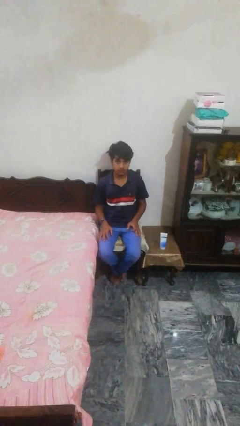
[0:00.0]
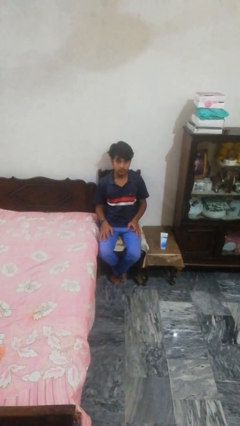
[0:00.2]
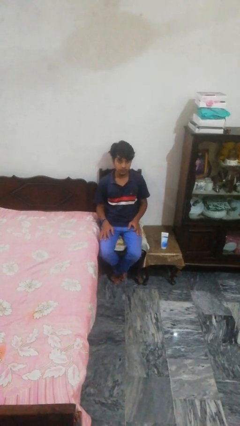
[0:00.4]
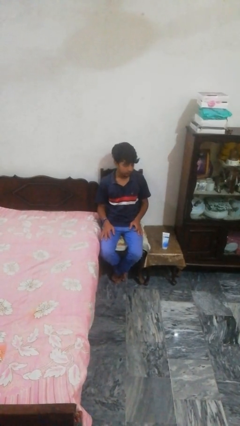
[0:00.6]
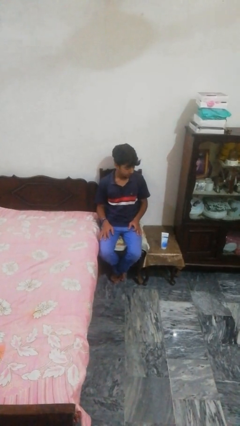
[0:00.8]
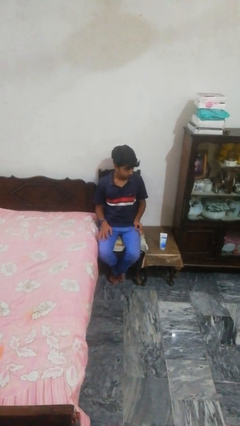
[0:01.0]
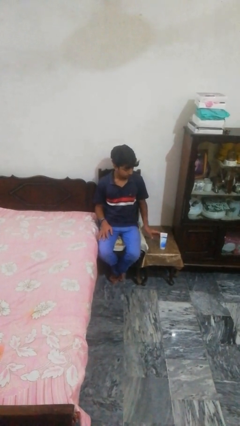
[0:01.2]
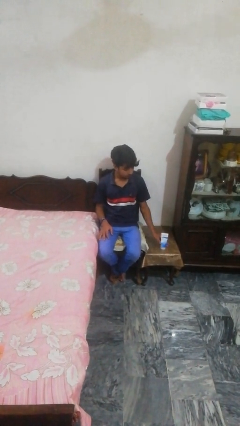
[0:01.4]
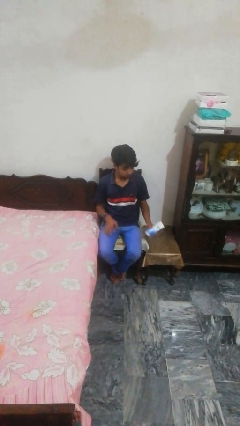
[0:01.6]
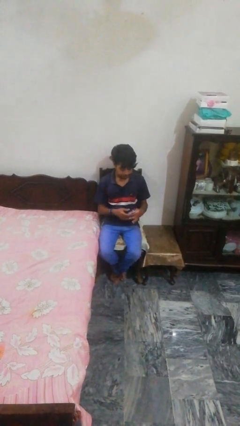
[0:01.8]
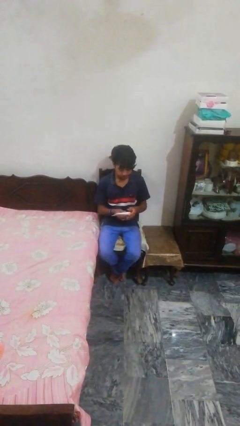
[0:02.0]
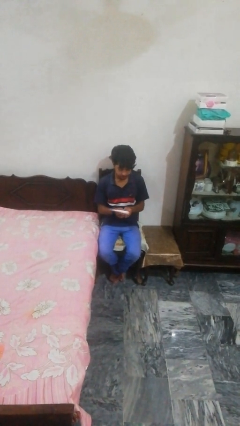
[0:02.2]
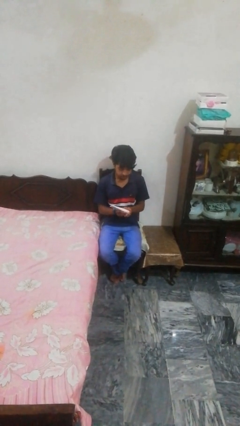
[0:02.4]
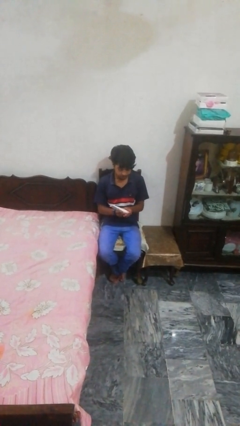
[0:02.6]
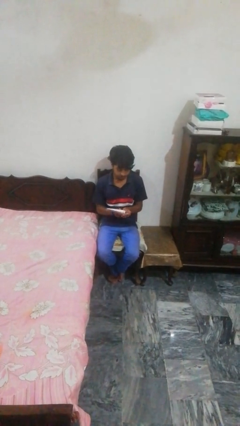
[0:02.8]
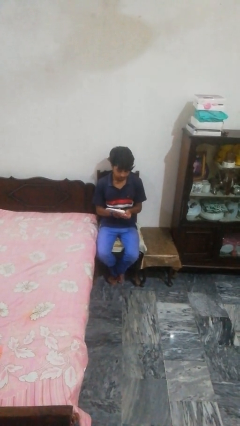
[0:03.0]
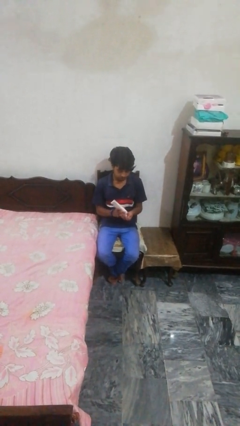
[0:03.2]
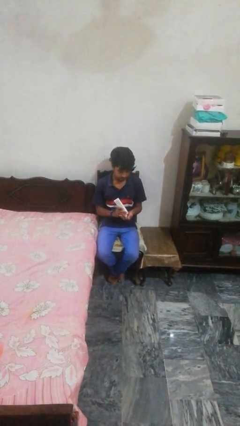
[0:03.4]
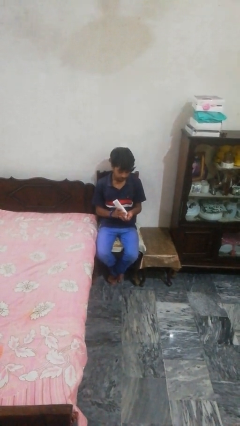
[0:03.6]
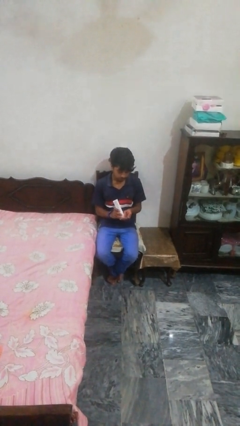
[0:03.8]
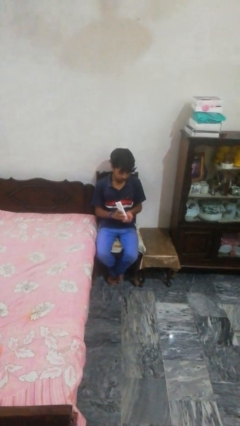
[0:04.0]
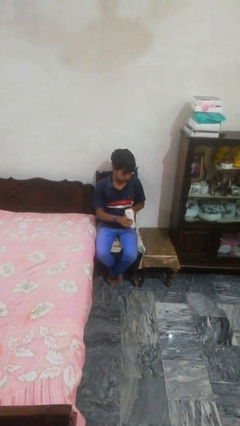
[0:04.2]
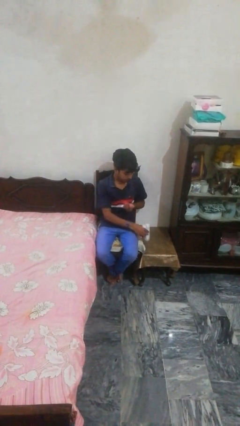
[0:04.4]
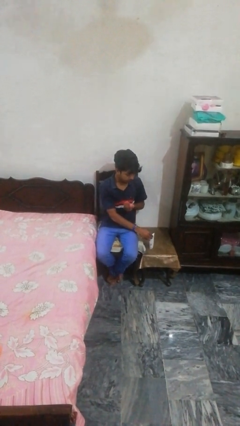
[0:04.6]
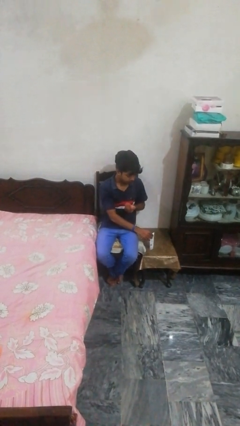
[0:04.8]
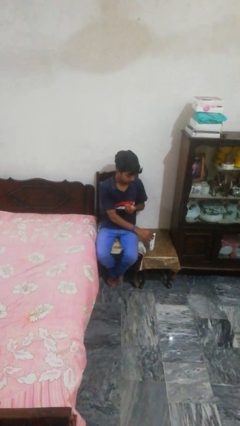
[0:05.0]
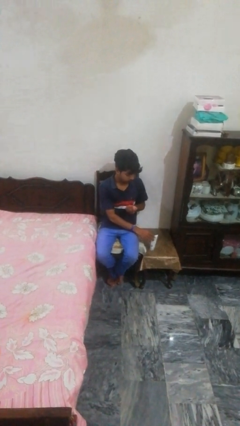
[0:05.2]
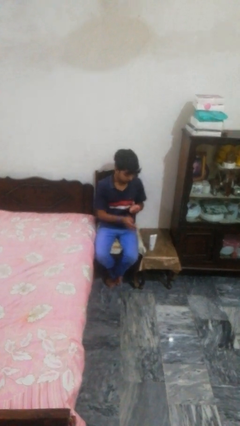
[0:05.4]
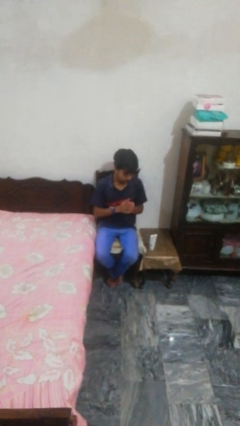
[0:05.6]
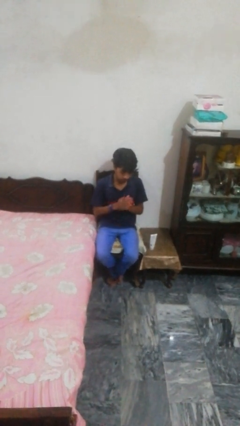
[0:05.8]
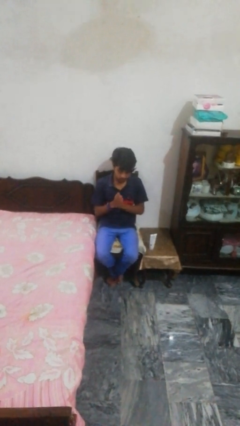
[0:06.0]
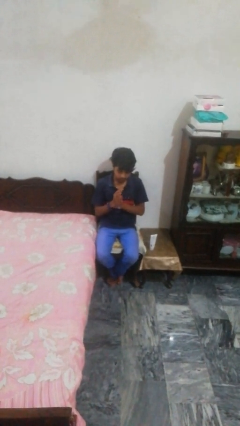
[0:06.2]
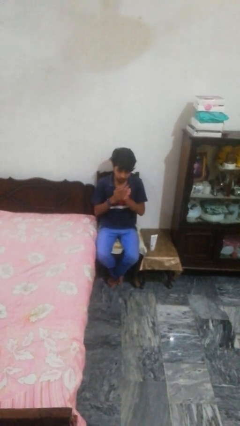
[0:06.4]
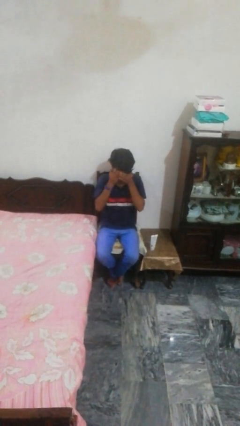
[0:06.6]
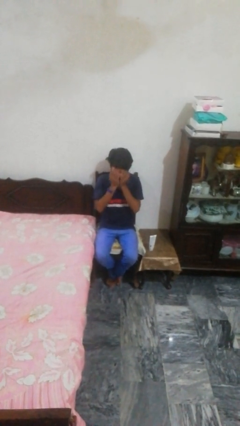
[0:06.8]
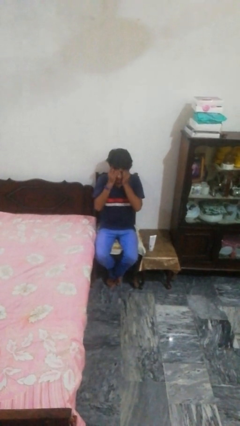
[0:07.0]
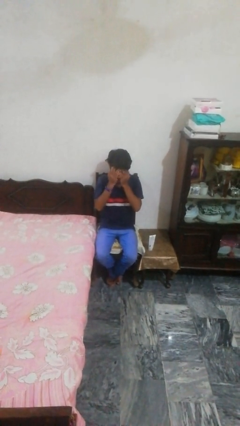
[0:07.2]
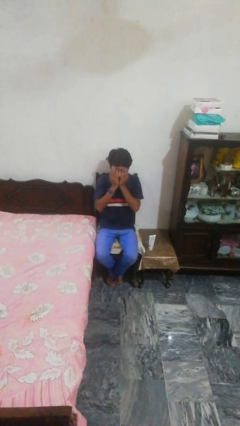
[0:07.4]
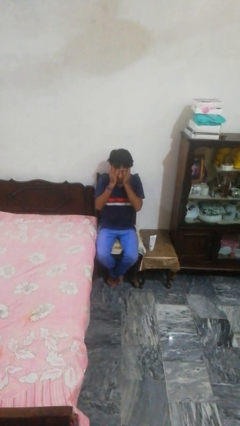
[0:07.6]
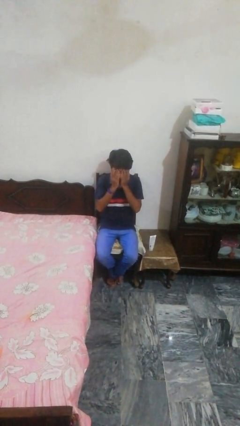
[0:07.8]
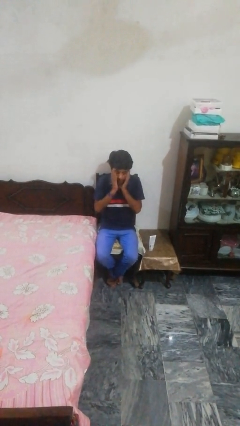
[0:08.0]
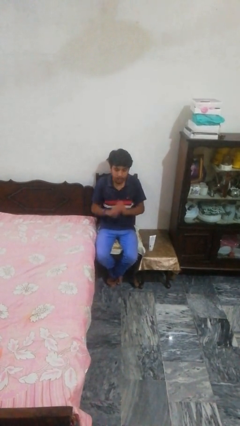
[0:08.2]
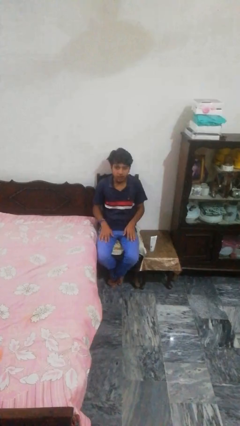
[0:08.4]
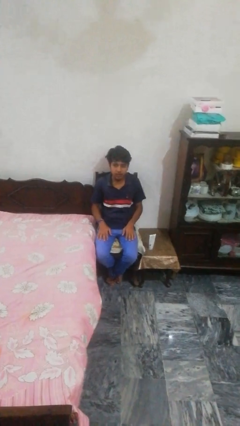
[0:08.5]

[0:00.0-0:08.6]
person applies facial moisturizer

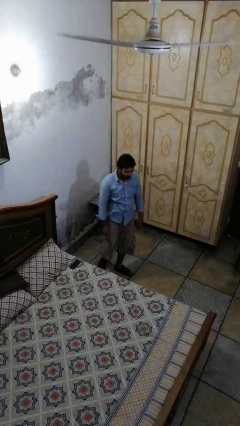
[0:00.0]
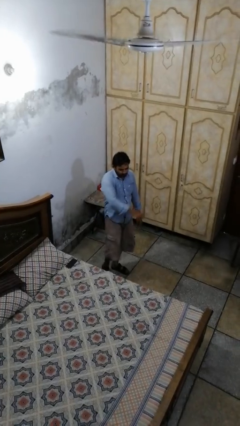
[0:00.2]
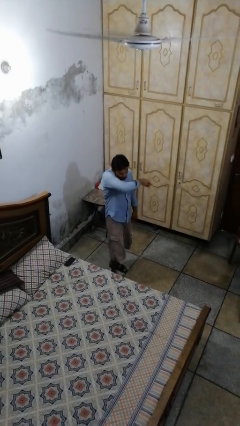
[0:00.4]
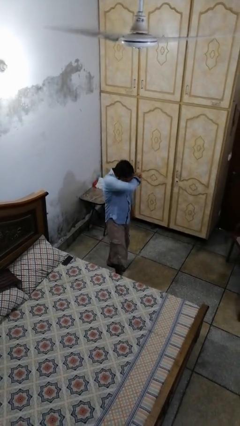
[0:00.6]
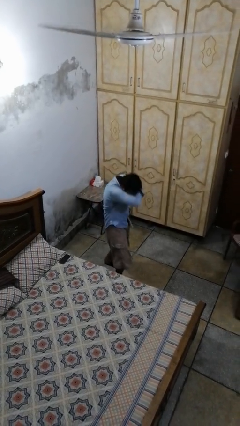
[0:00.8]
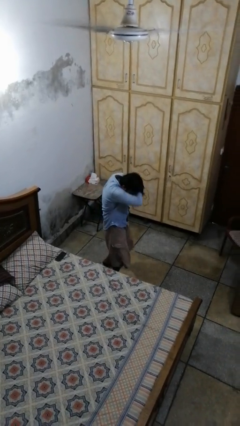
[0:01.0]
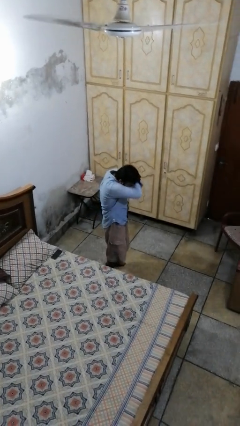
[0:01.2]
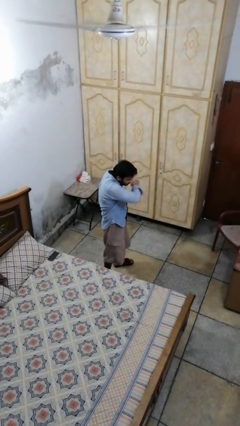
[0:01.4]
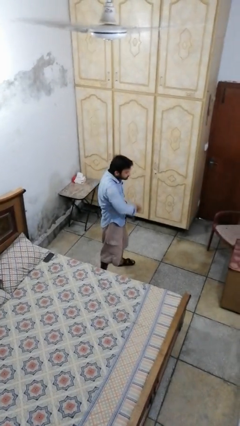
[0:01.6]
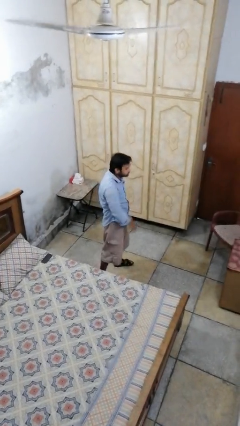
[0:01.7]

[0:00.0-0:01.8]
person sneezes into arm

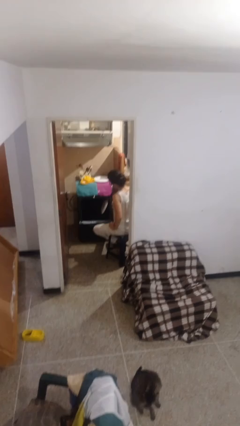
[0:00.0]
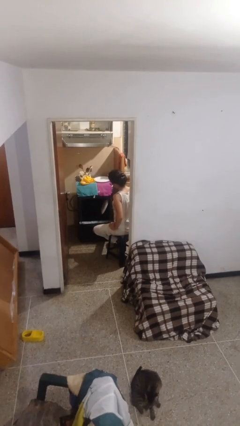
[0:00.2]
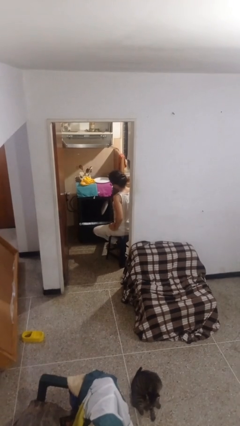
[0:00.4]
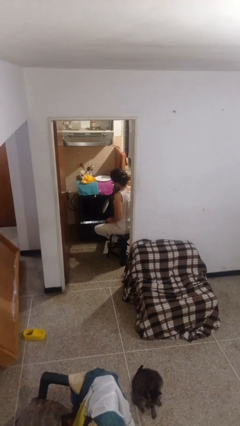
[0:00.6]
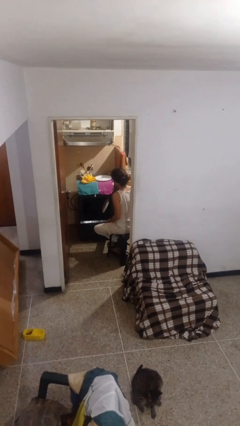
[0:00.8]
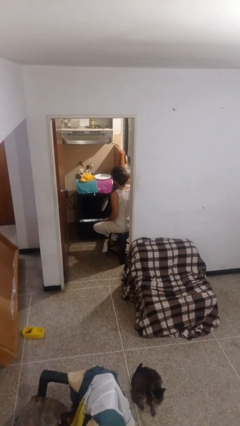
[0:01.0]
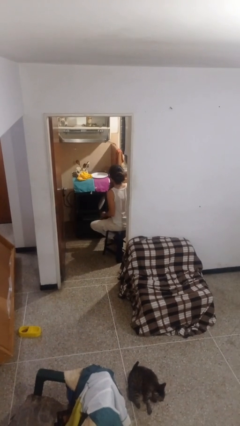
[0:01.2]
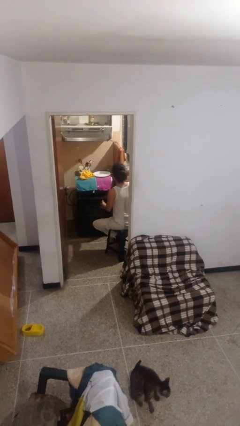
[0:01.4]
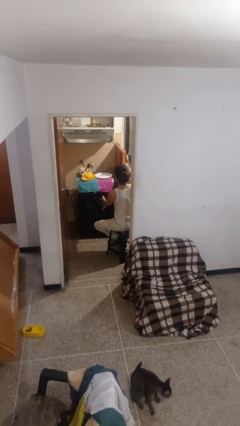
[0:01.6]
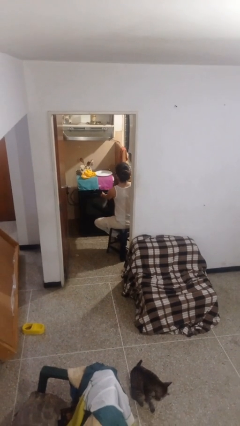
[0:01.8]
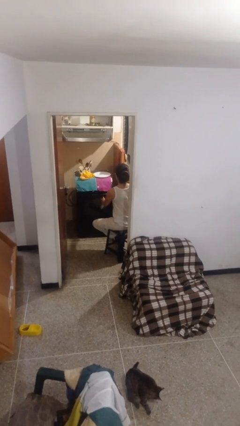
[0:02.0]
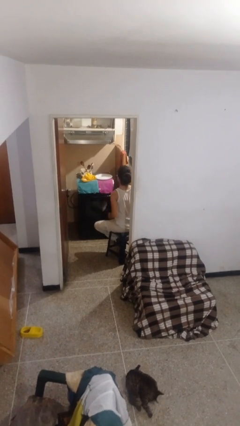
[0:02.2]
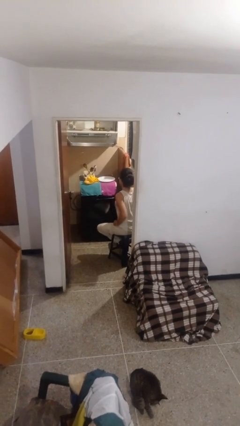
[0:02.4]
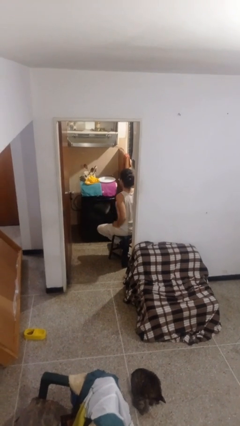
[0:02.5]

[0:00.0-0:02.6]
person closes dishwasher

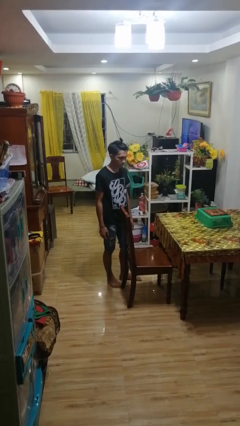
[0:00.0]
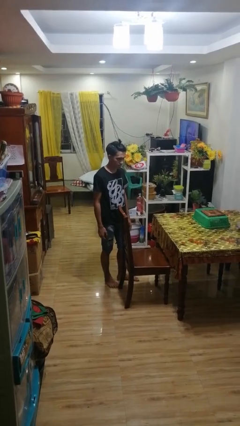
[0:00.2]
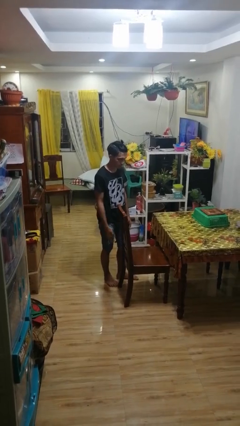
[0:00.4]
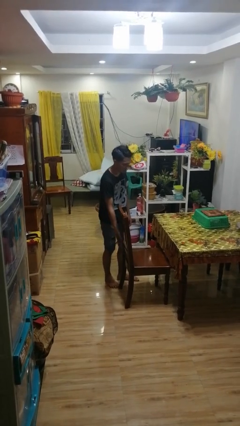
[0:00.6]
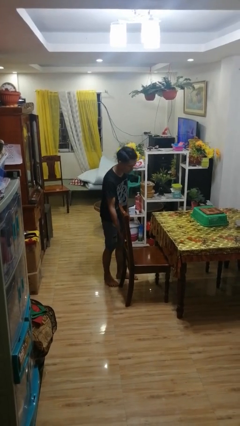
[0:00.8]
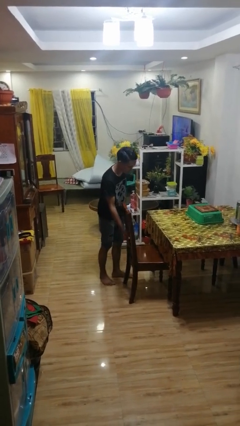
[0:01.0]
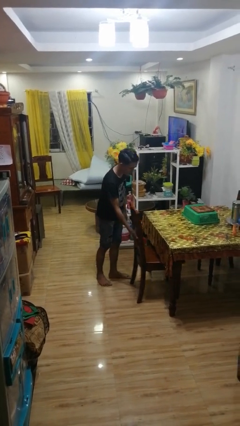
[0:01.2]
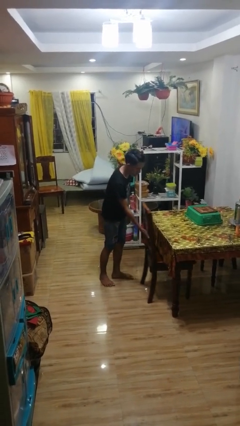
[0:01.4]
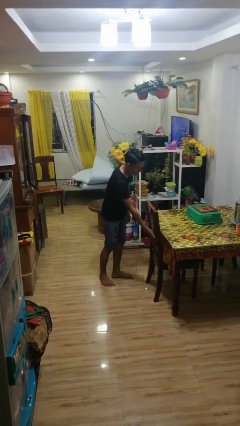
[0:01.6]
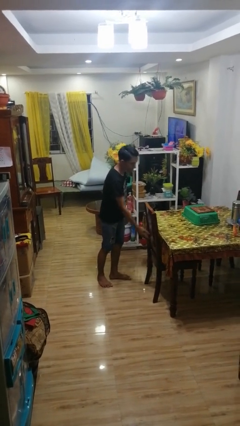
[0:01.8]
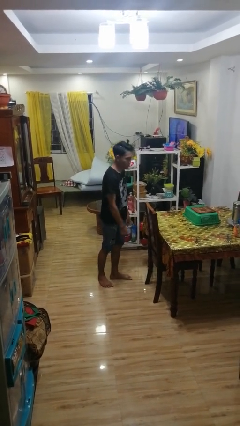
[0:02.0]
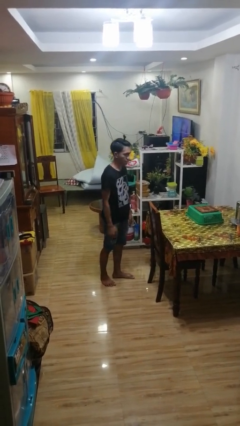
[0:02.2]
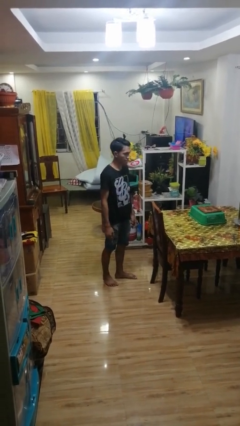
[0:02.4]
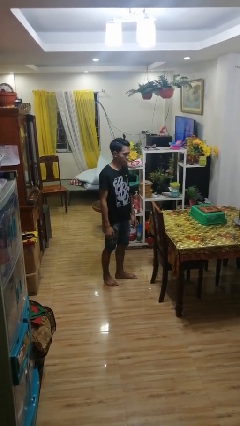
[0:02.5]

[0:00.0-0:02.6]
person pushes in chair

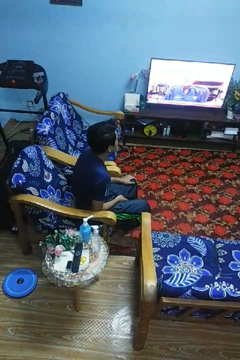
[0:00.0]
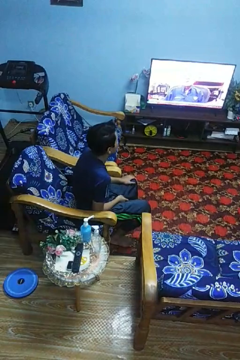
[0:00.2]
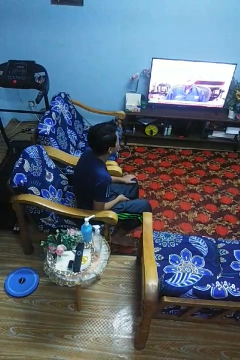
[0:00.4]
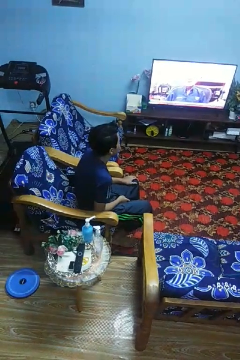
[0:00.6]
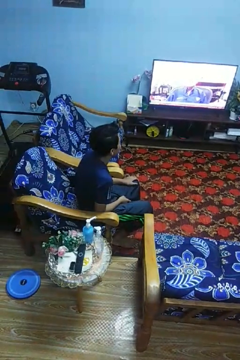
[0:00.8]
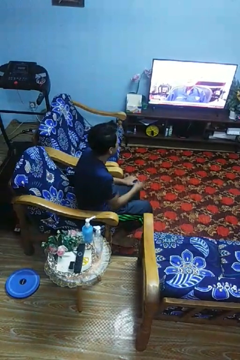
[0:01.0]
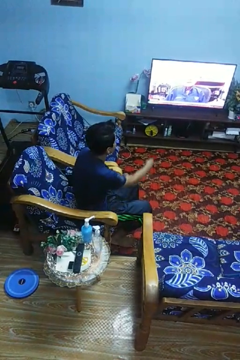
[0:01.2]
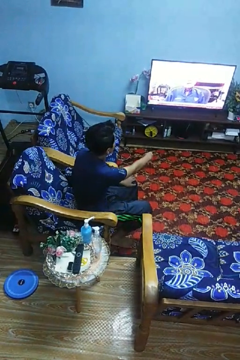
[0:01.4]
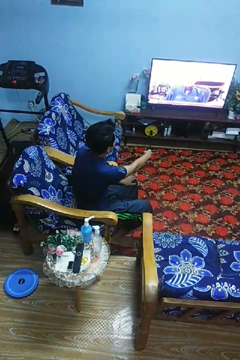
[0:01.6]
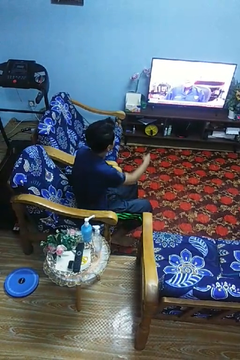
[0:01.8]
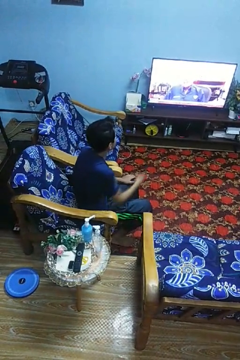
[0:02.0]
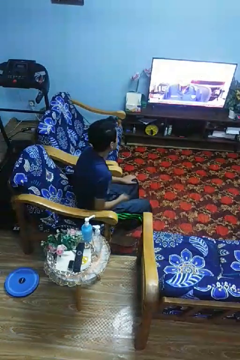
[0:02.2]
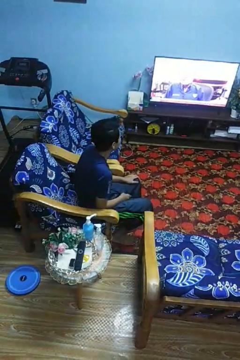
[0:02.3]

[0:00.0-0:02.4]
person uses television remote

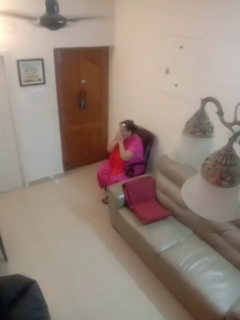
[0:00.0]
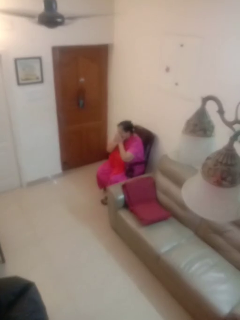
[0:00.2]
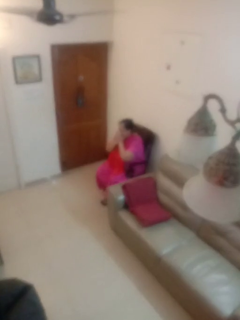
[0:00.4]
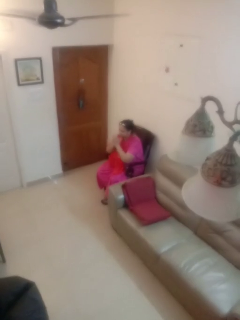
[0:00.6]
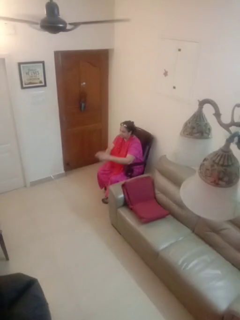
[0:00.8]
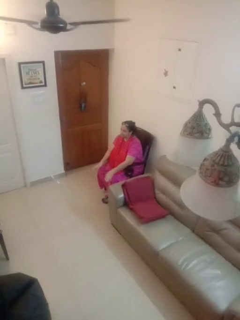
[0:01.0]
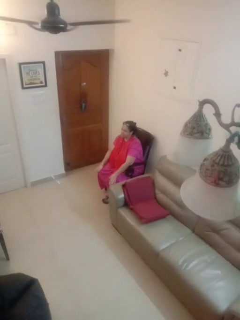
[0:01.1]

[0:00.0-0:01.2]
person sneezes into hand
